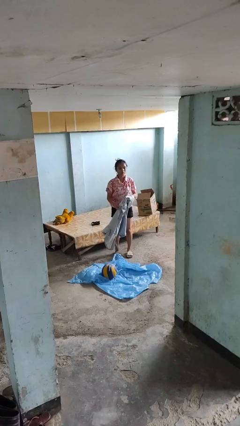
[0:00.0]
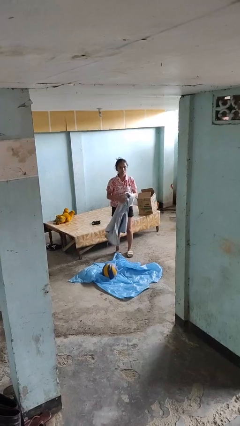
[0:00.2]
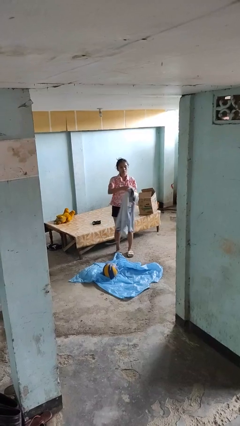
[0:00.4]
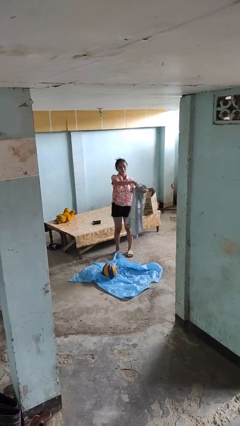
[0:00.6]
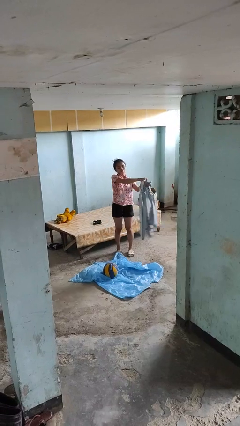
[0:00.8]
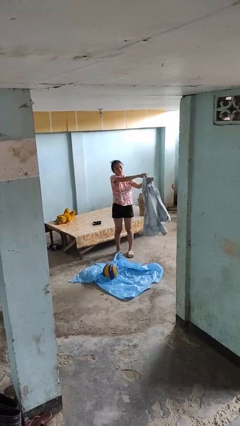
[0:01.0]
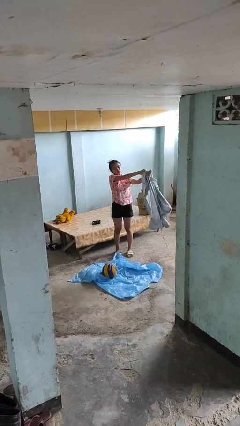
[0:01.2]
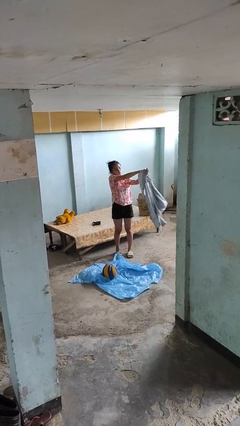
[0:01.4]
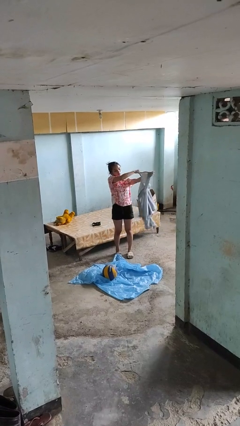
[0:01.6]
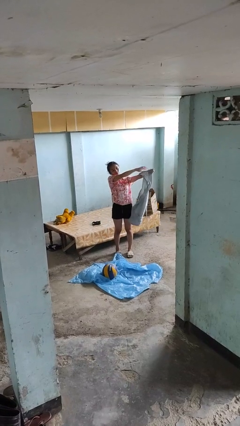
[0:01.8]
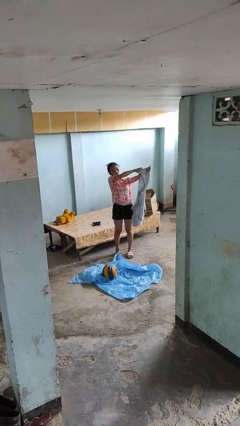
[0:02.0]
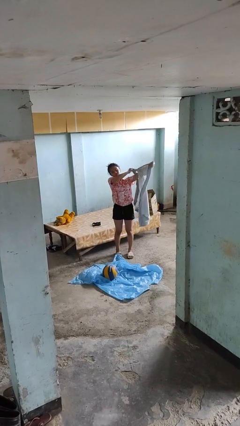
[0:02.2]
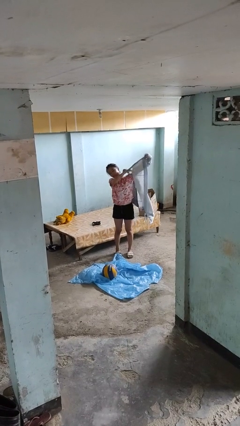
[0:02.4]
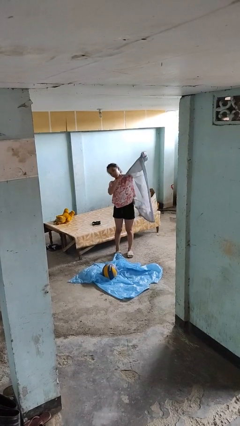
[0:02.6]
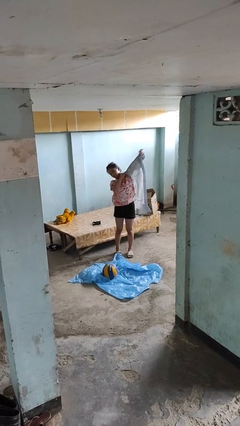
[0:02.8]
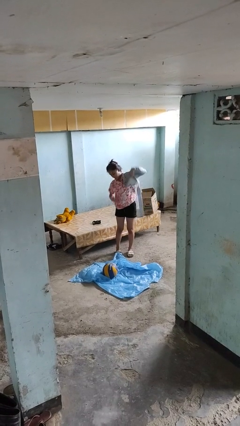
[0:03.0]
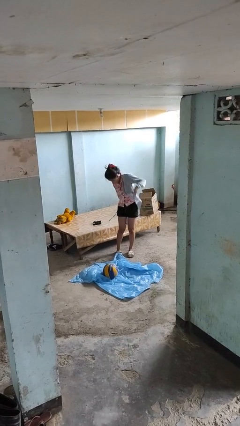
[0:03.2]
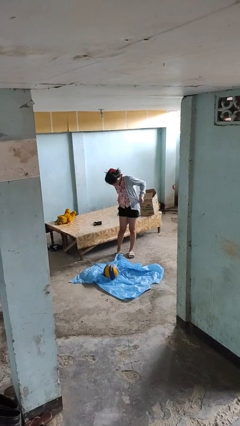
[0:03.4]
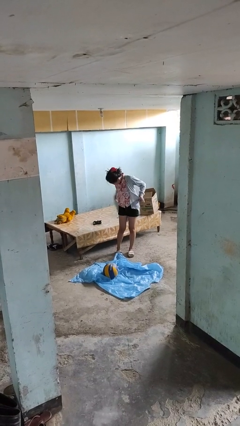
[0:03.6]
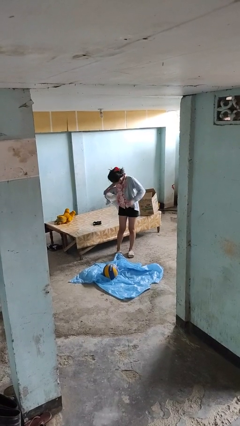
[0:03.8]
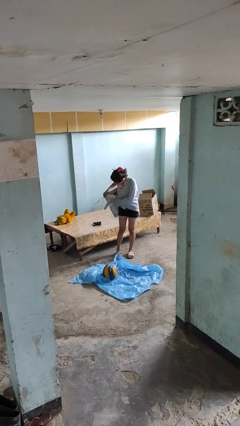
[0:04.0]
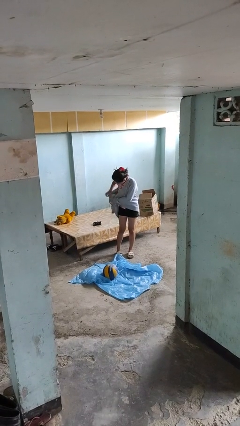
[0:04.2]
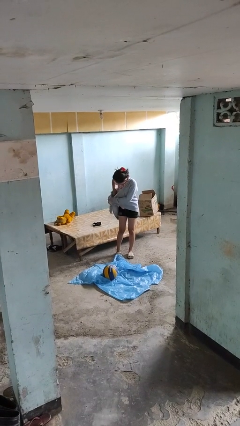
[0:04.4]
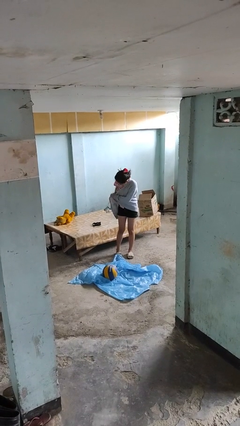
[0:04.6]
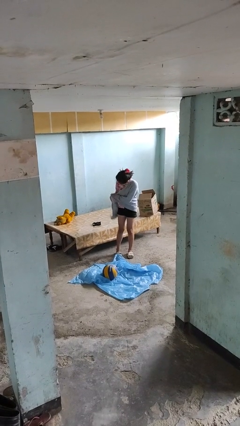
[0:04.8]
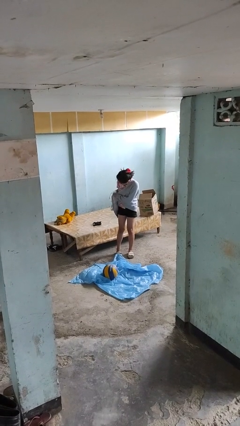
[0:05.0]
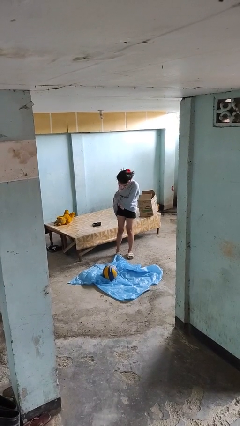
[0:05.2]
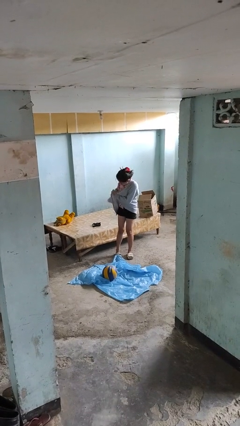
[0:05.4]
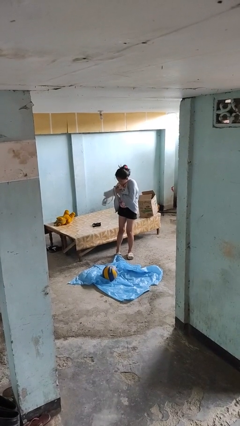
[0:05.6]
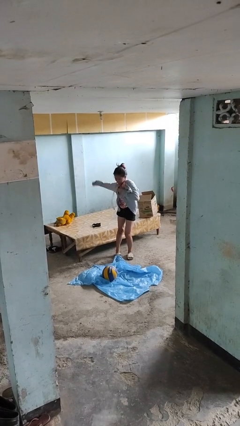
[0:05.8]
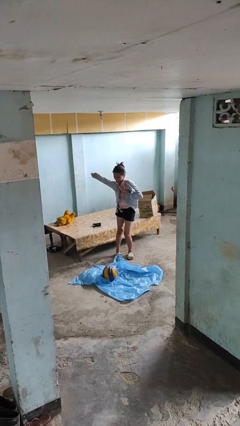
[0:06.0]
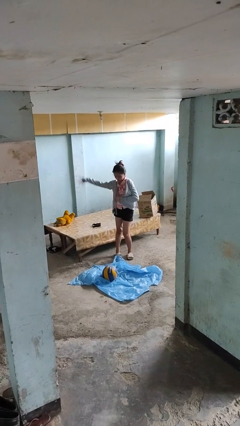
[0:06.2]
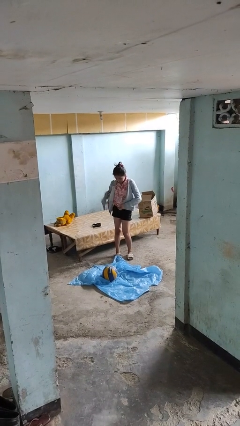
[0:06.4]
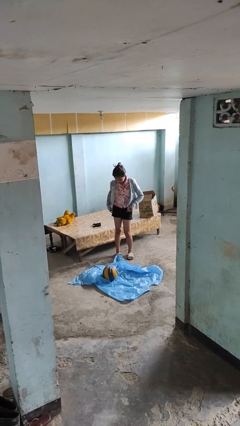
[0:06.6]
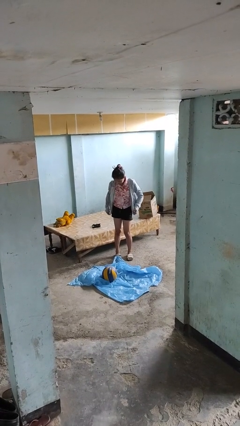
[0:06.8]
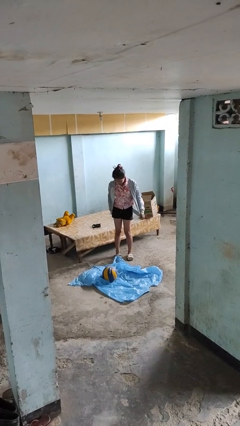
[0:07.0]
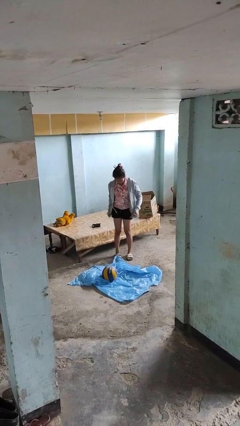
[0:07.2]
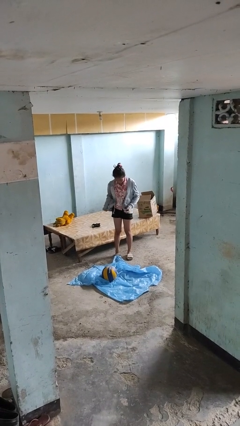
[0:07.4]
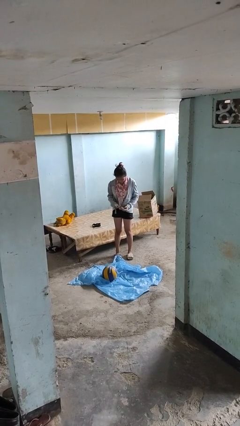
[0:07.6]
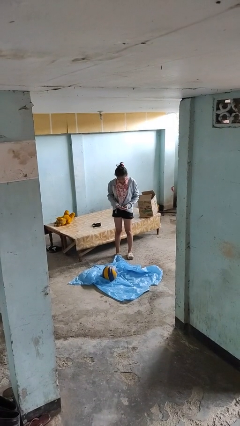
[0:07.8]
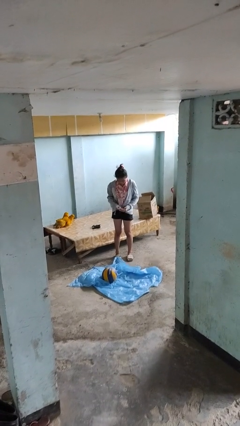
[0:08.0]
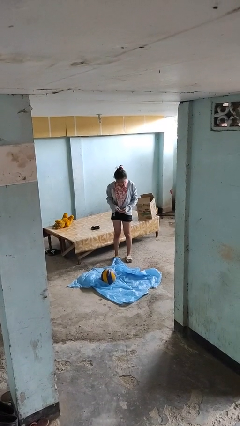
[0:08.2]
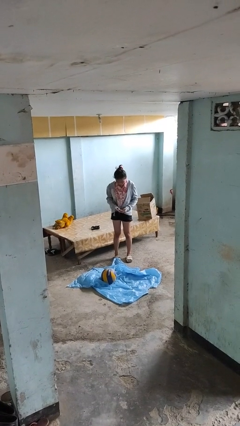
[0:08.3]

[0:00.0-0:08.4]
person puts on jacket

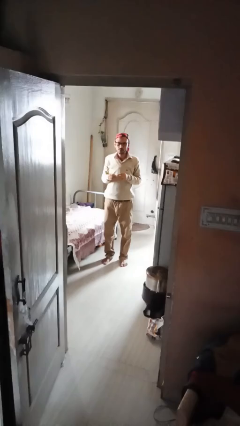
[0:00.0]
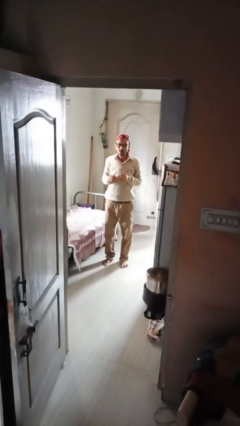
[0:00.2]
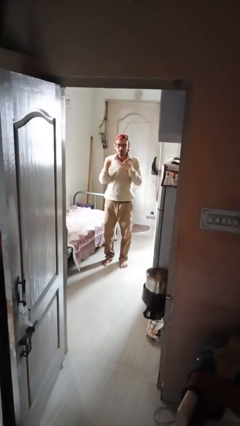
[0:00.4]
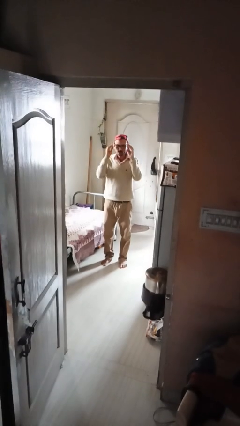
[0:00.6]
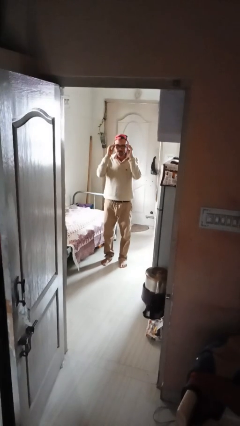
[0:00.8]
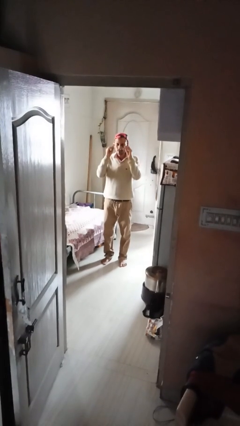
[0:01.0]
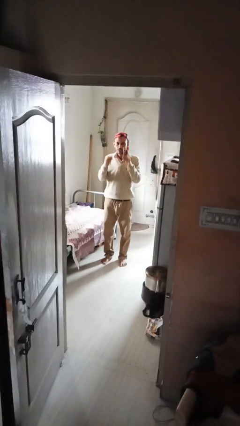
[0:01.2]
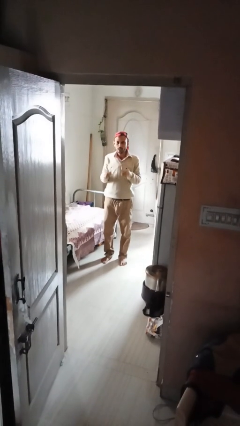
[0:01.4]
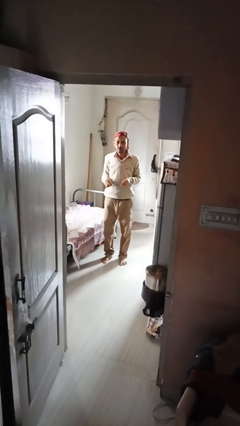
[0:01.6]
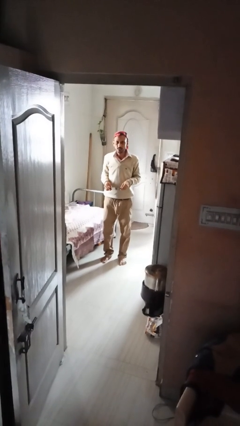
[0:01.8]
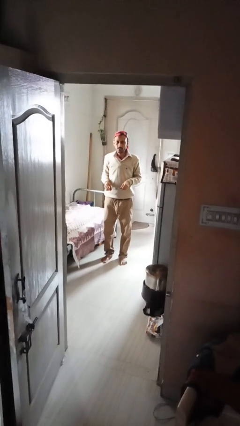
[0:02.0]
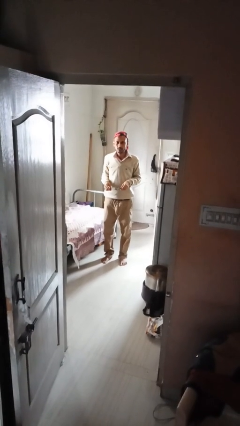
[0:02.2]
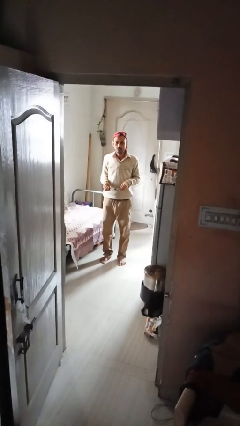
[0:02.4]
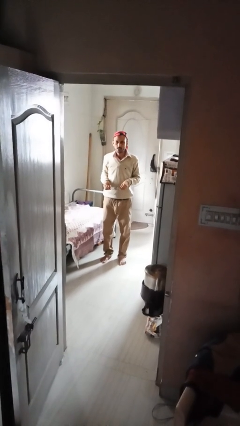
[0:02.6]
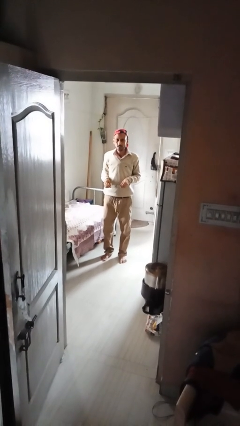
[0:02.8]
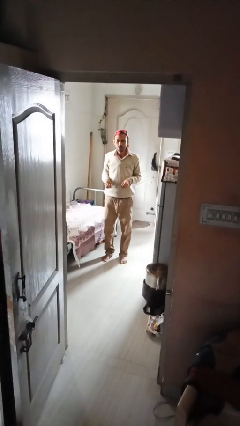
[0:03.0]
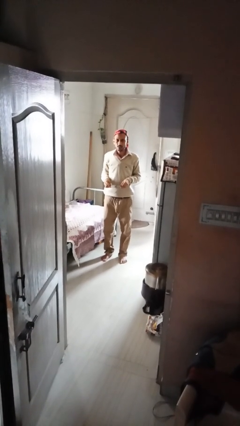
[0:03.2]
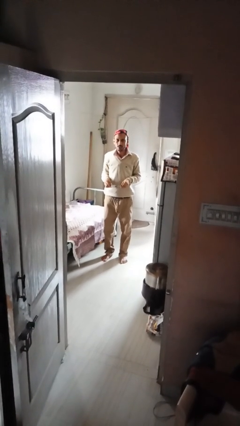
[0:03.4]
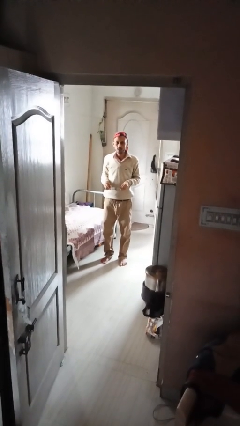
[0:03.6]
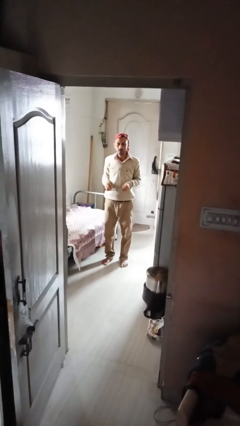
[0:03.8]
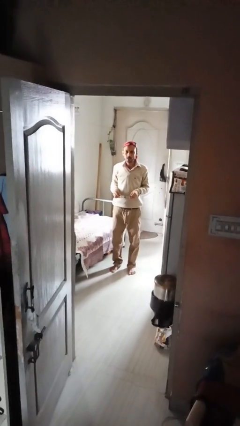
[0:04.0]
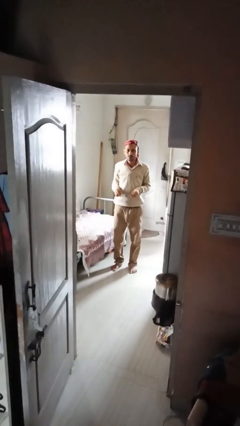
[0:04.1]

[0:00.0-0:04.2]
person takes off sunglasses

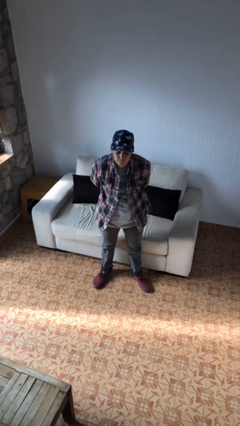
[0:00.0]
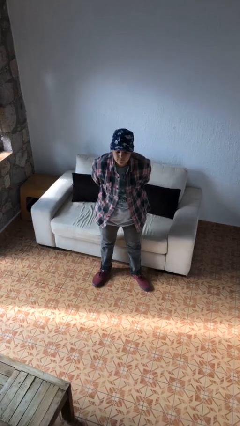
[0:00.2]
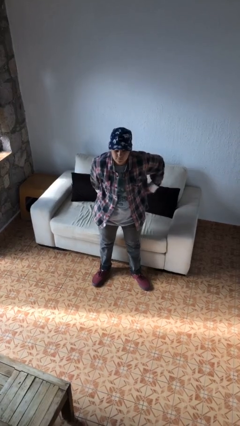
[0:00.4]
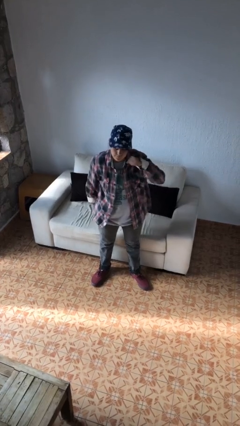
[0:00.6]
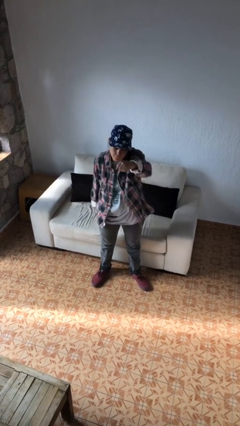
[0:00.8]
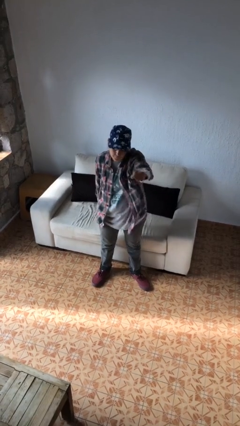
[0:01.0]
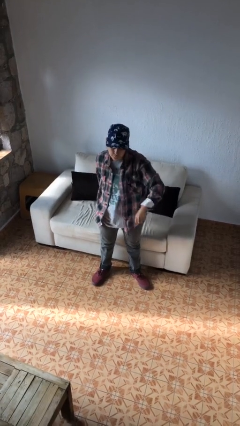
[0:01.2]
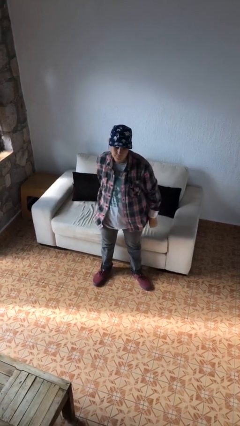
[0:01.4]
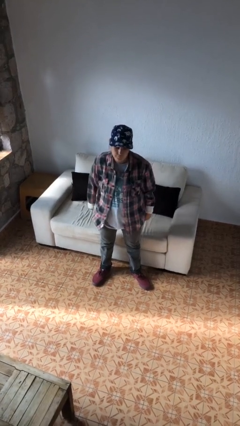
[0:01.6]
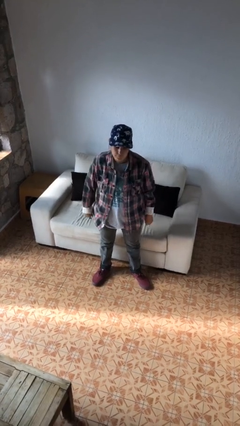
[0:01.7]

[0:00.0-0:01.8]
person punches

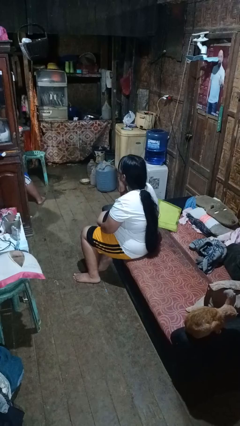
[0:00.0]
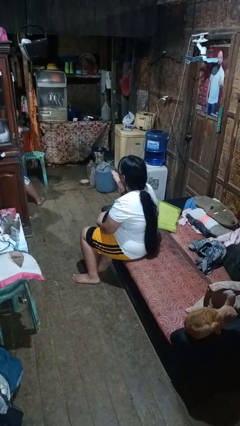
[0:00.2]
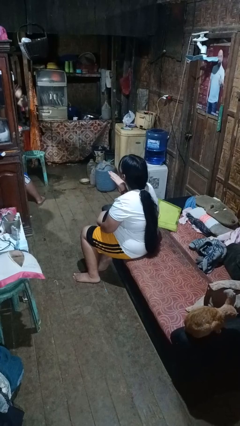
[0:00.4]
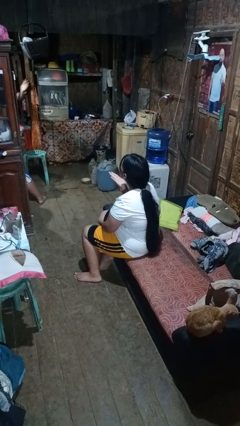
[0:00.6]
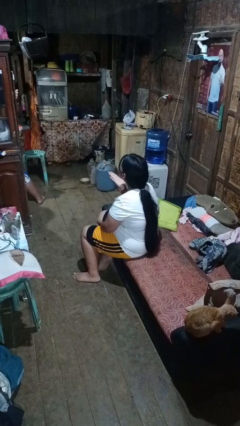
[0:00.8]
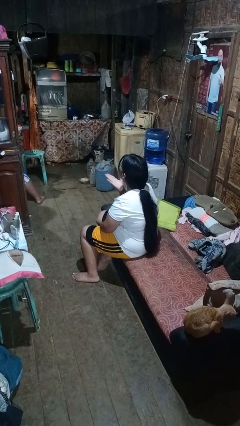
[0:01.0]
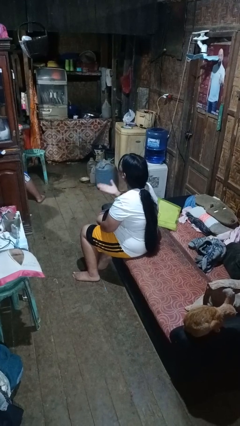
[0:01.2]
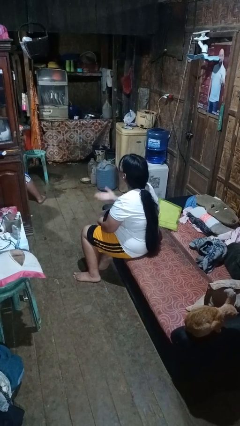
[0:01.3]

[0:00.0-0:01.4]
person gestures blow kiss

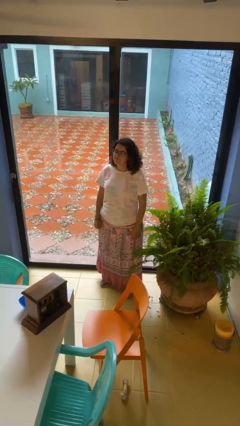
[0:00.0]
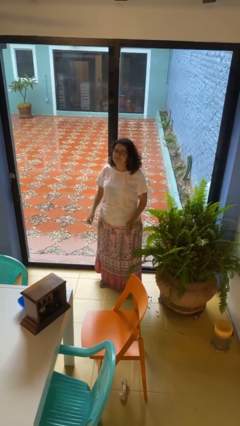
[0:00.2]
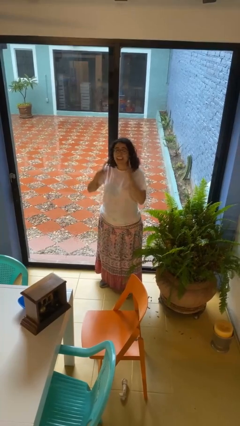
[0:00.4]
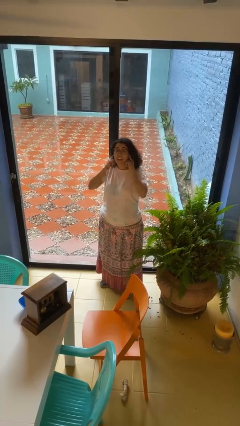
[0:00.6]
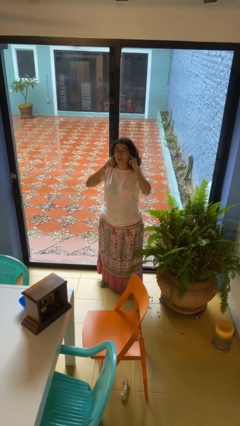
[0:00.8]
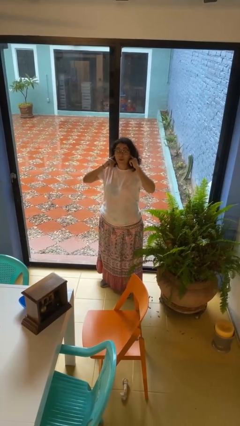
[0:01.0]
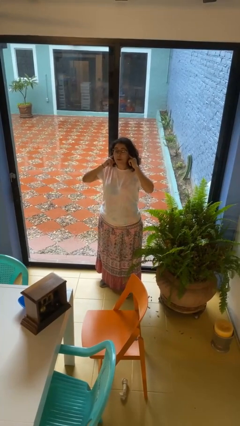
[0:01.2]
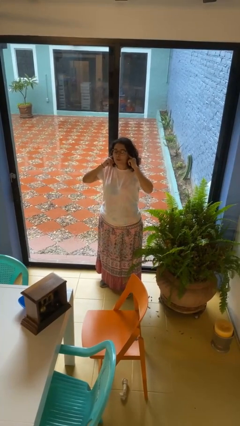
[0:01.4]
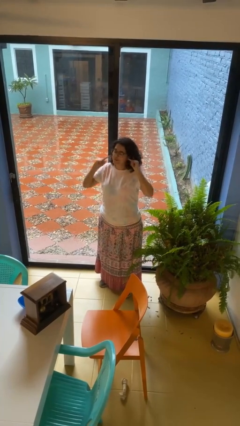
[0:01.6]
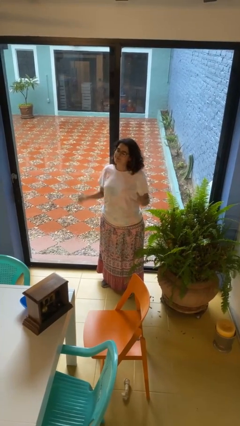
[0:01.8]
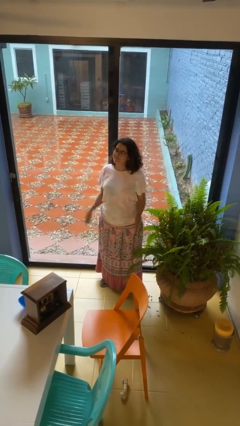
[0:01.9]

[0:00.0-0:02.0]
person puts fingers in ear
